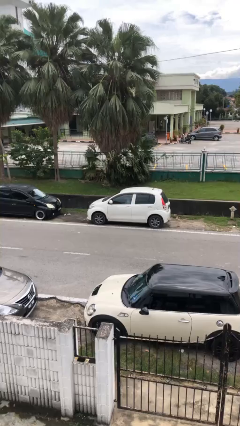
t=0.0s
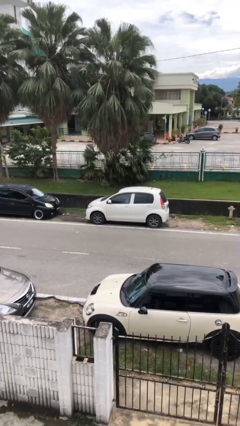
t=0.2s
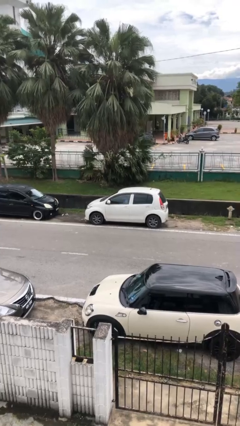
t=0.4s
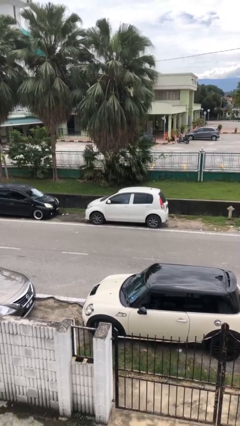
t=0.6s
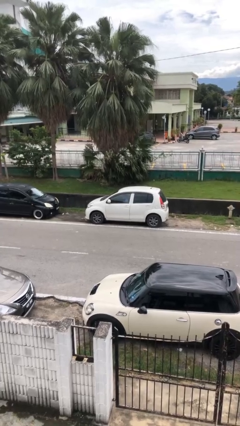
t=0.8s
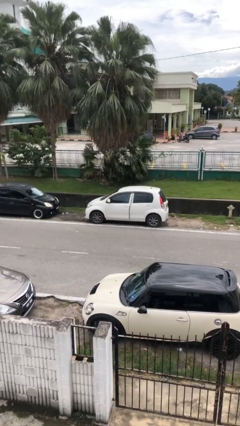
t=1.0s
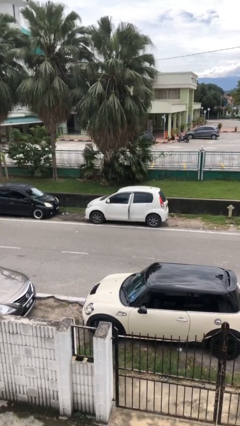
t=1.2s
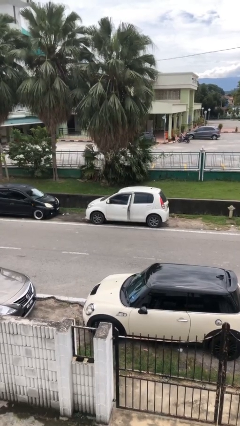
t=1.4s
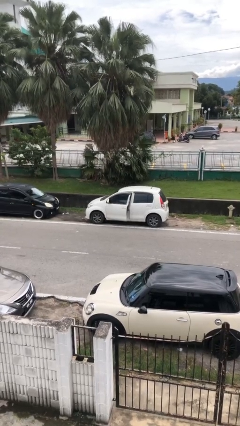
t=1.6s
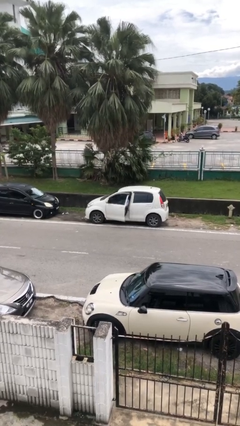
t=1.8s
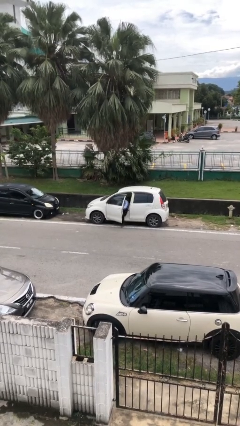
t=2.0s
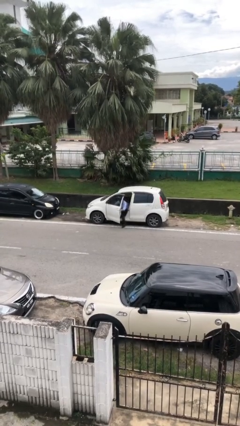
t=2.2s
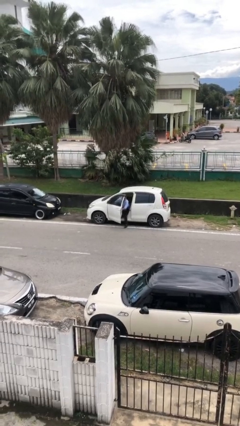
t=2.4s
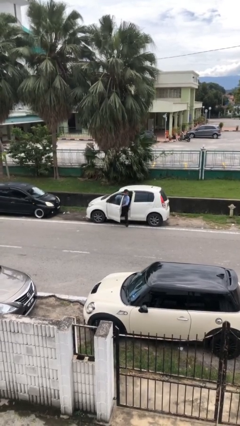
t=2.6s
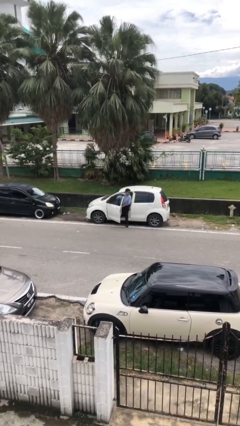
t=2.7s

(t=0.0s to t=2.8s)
person opens car door

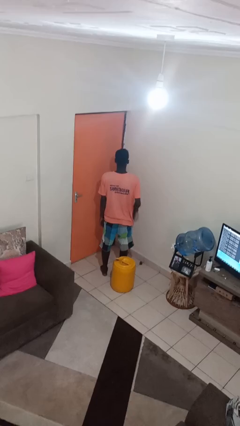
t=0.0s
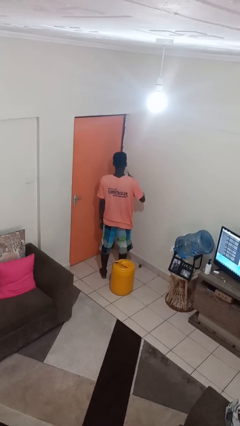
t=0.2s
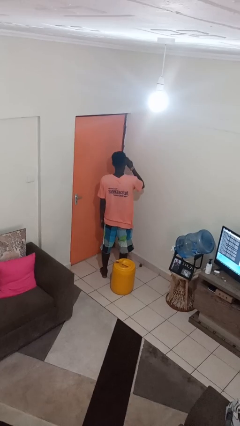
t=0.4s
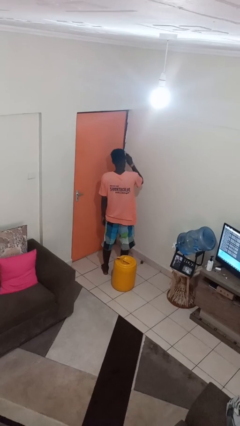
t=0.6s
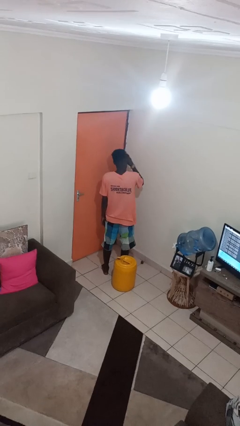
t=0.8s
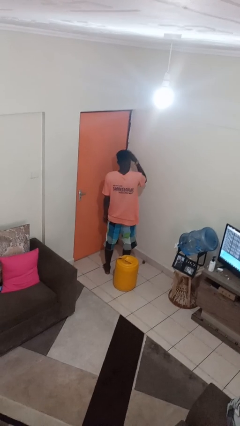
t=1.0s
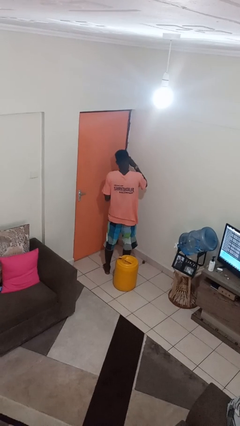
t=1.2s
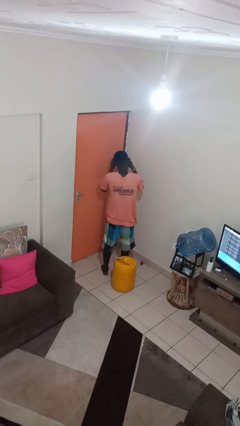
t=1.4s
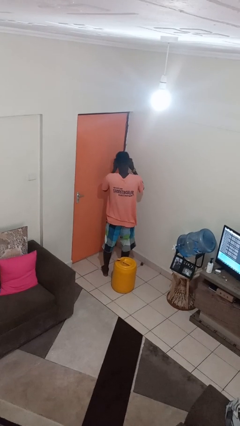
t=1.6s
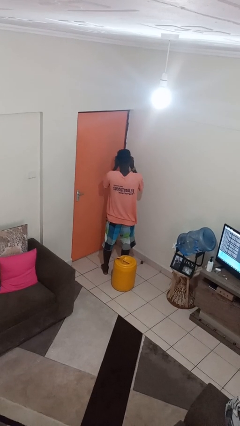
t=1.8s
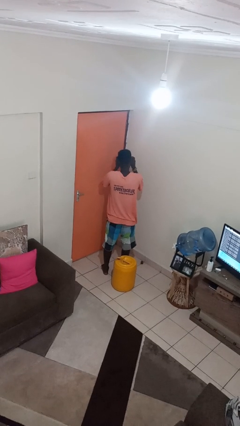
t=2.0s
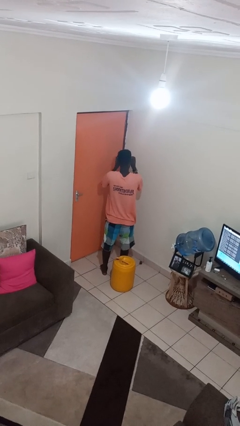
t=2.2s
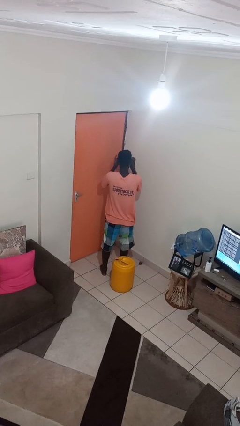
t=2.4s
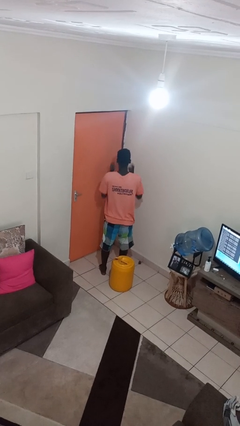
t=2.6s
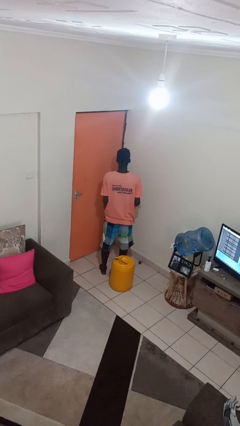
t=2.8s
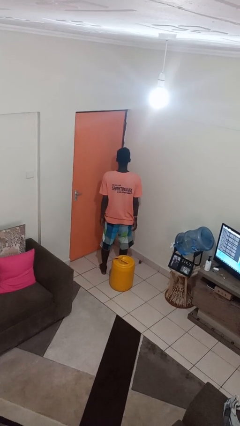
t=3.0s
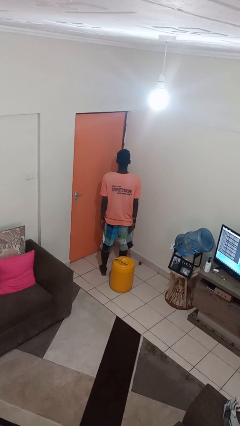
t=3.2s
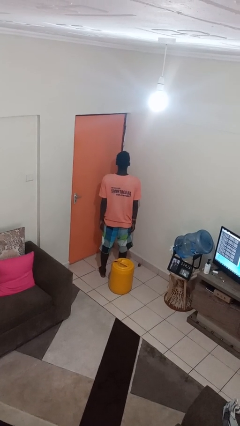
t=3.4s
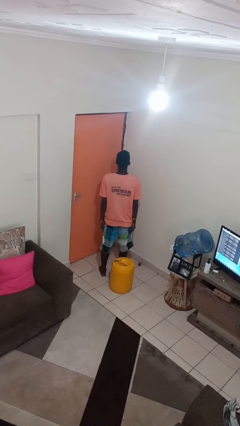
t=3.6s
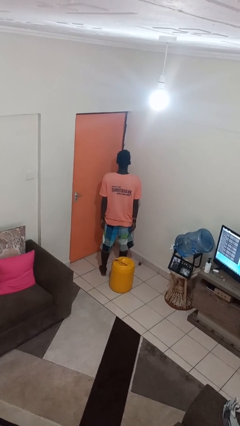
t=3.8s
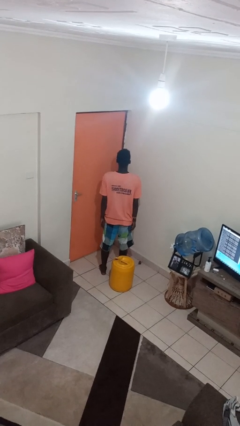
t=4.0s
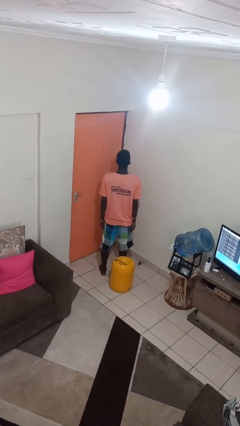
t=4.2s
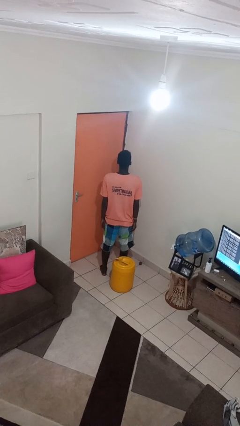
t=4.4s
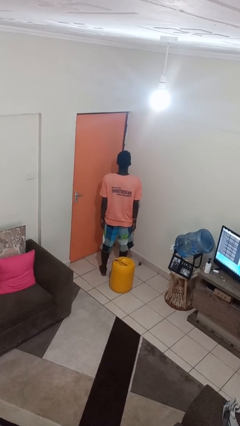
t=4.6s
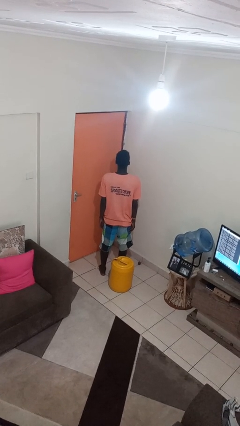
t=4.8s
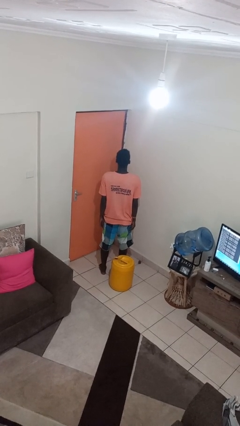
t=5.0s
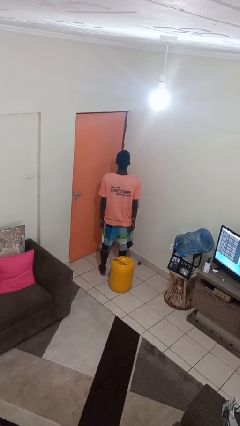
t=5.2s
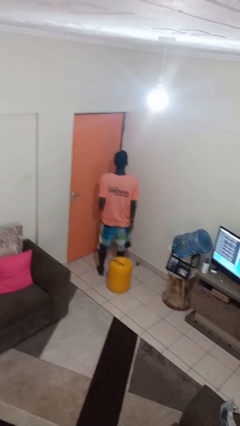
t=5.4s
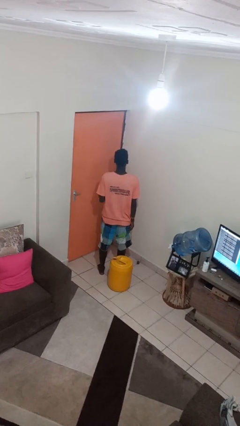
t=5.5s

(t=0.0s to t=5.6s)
person puts on sunglasses

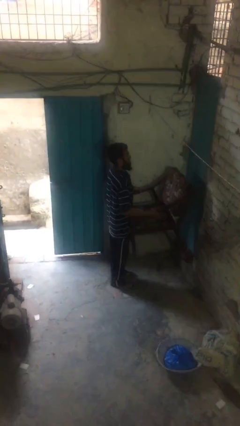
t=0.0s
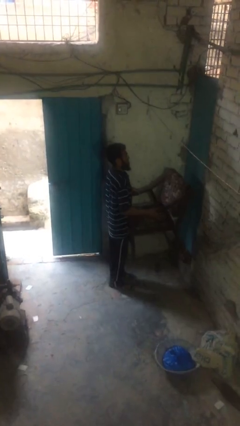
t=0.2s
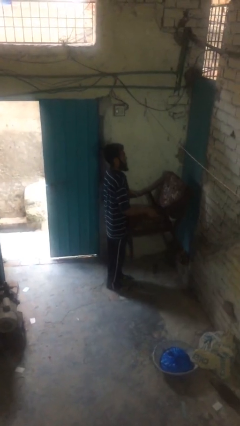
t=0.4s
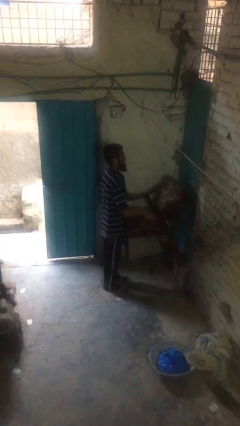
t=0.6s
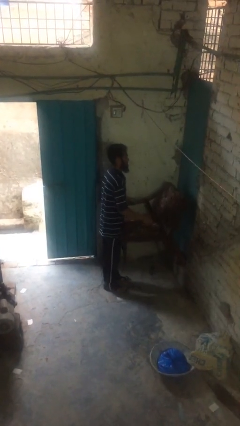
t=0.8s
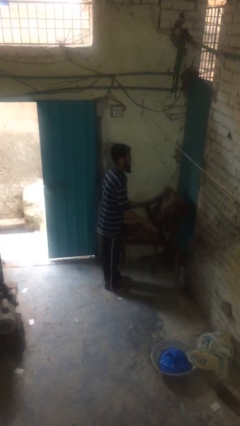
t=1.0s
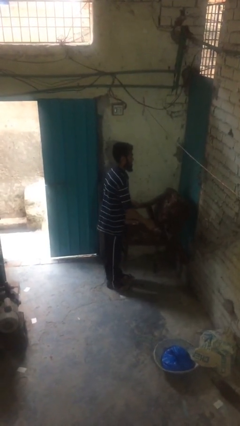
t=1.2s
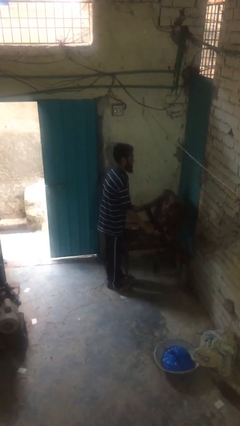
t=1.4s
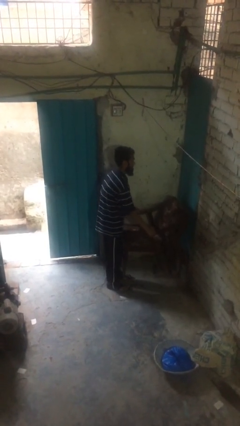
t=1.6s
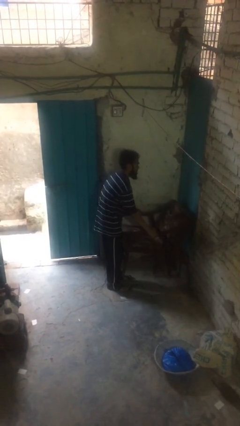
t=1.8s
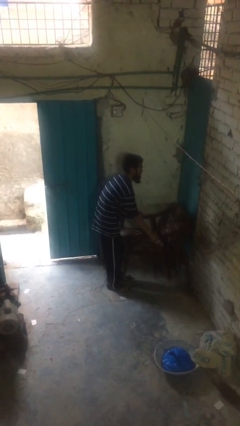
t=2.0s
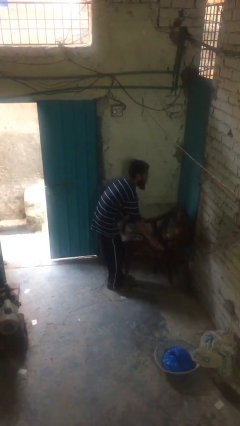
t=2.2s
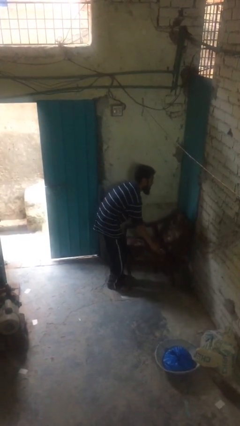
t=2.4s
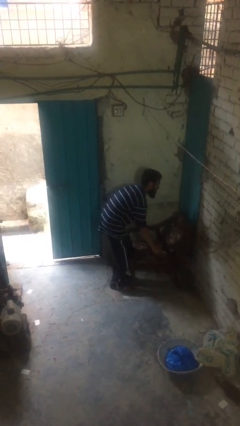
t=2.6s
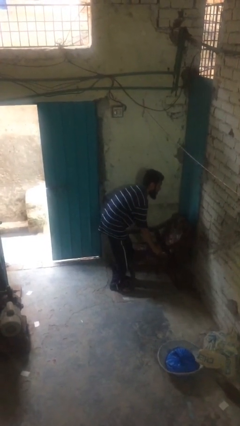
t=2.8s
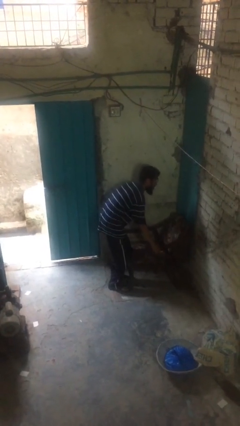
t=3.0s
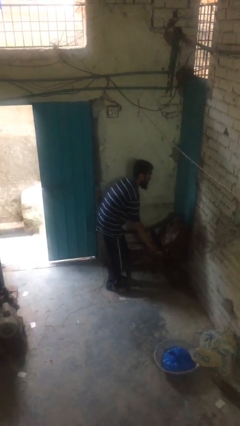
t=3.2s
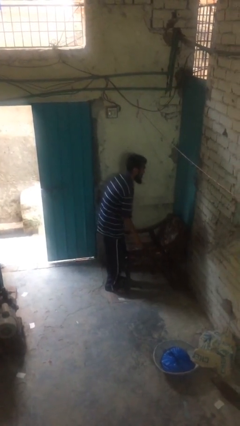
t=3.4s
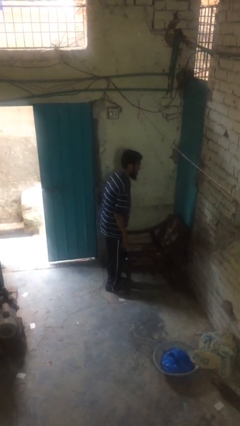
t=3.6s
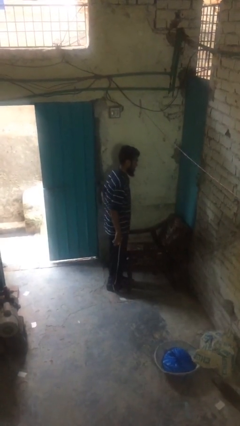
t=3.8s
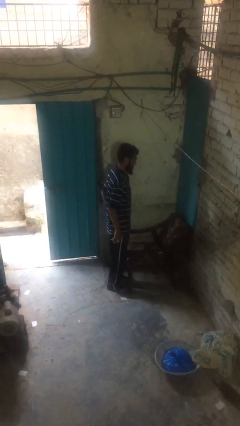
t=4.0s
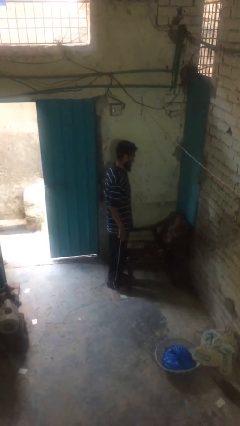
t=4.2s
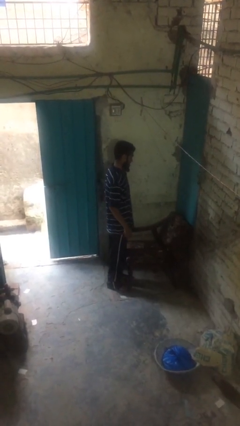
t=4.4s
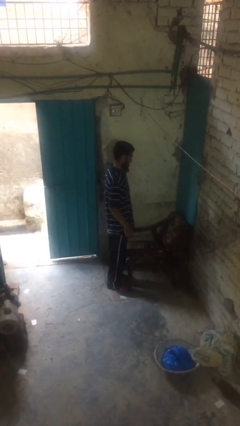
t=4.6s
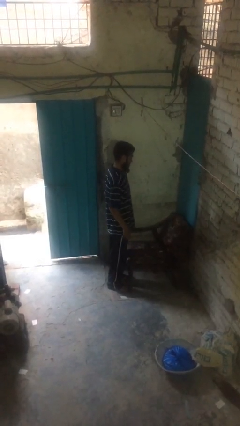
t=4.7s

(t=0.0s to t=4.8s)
person puts down object on floor

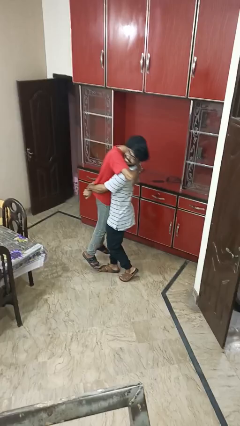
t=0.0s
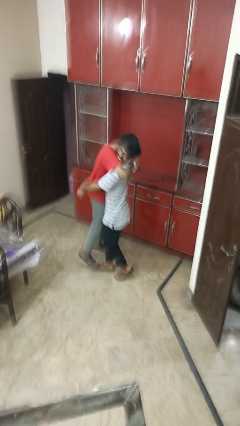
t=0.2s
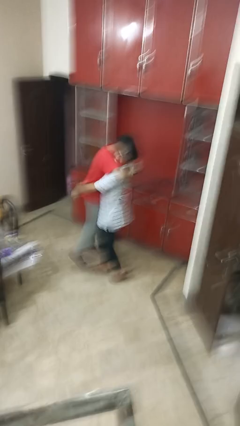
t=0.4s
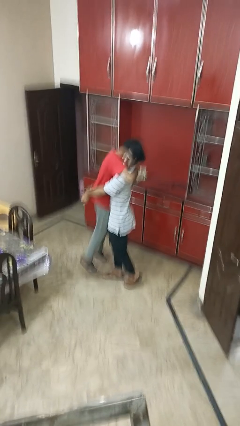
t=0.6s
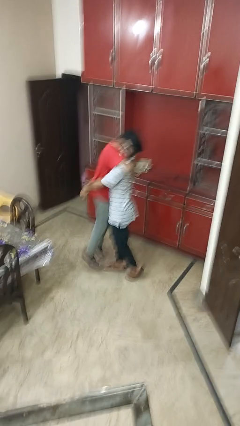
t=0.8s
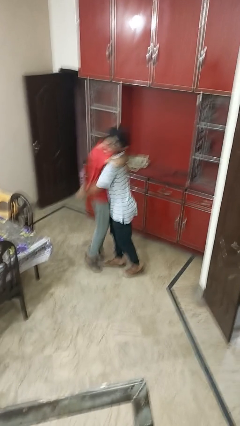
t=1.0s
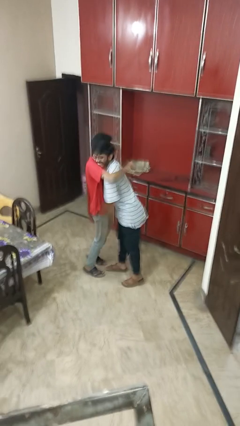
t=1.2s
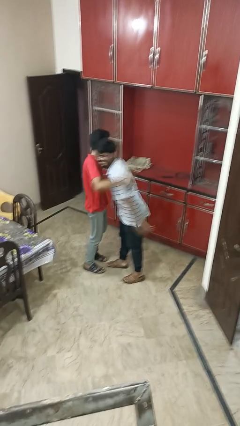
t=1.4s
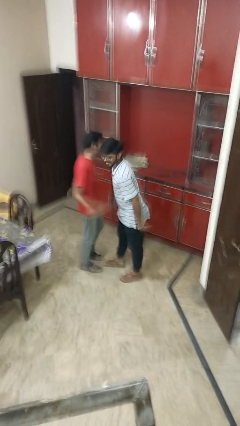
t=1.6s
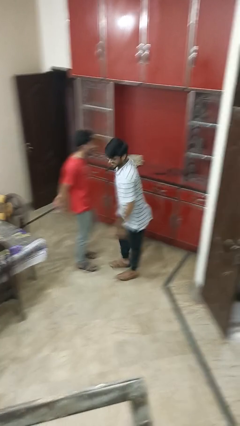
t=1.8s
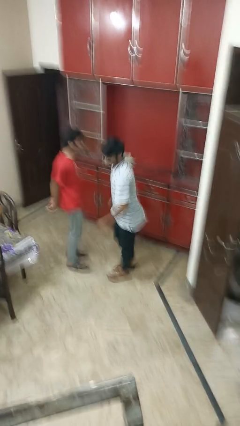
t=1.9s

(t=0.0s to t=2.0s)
person puts down person

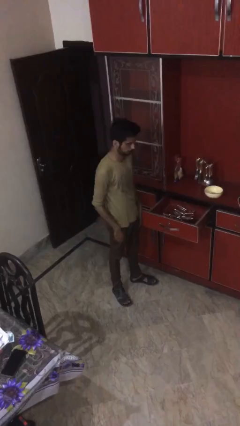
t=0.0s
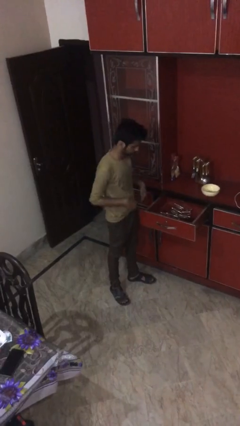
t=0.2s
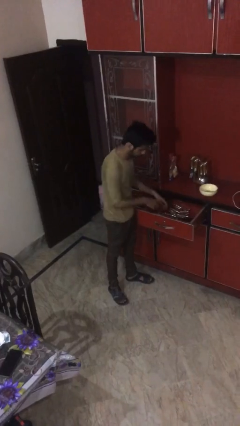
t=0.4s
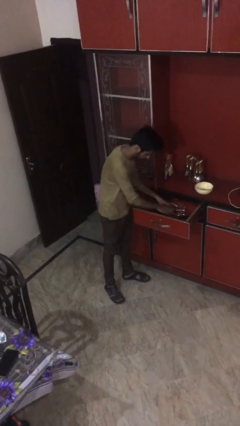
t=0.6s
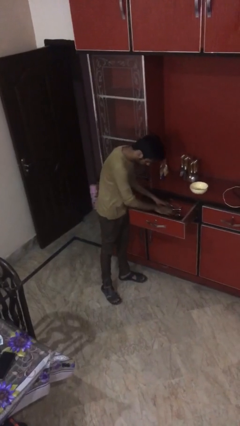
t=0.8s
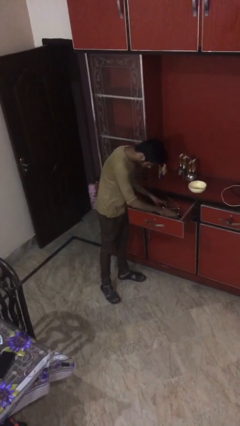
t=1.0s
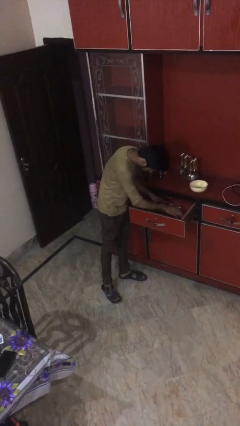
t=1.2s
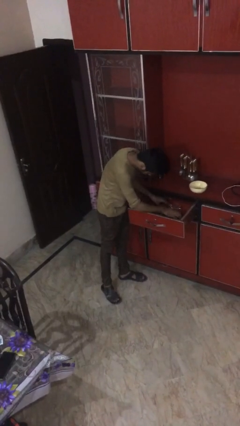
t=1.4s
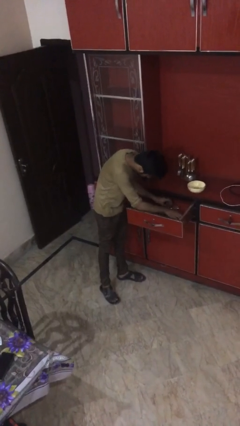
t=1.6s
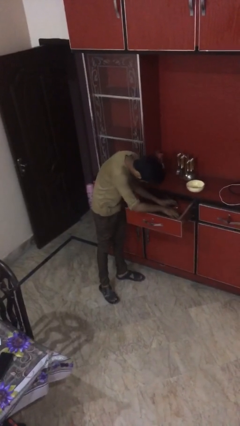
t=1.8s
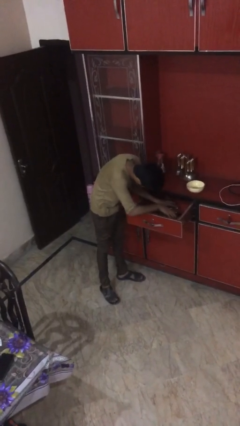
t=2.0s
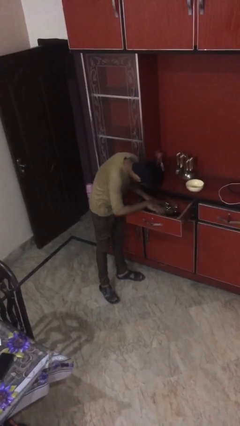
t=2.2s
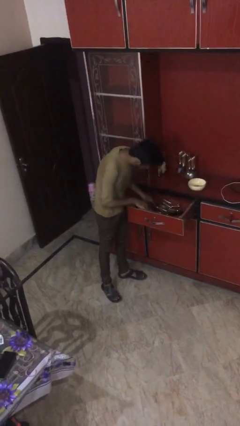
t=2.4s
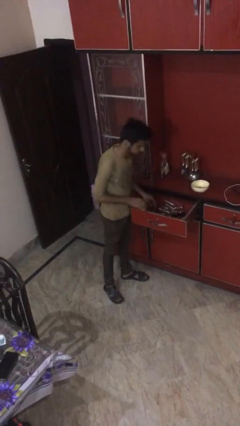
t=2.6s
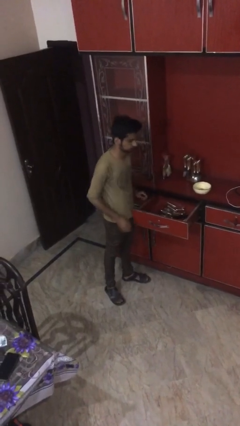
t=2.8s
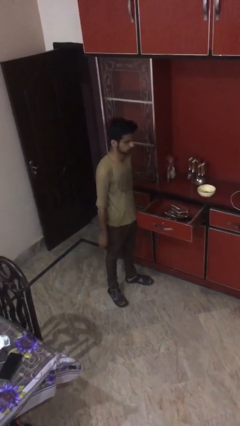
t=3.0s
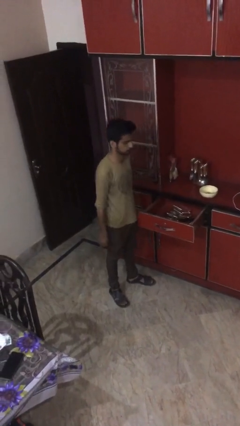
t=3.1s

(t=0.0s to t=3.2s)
person searches in kitchen drawer
